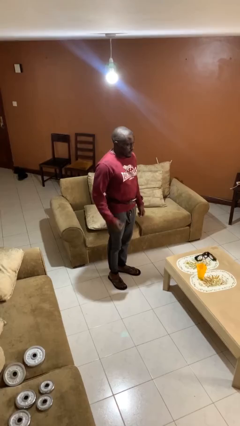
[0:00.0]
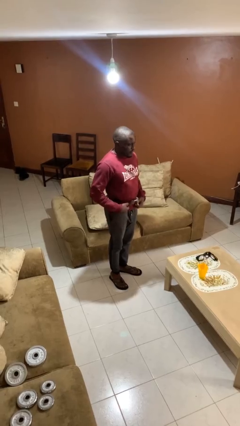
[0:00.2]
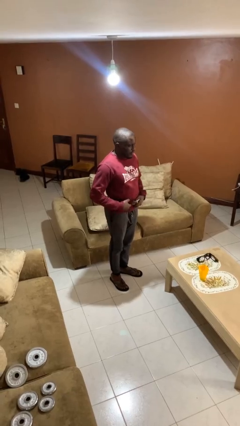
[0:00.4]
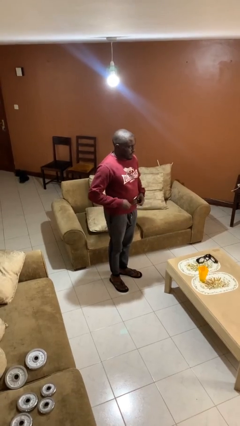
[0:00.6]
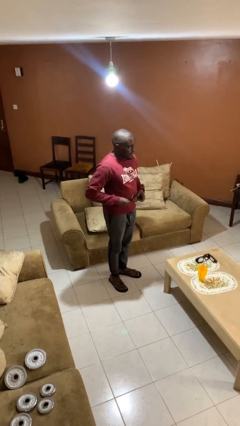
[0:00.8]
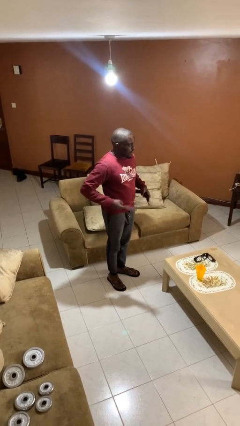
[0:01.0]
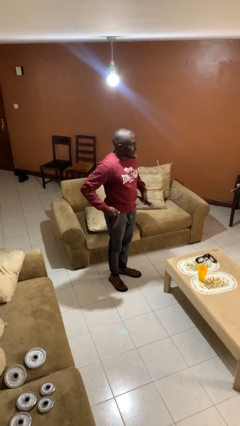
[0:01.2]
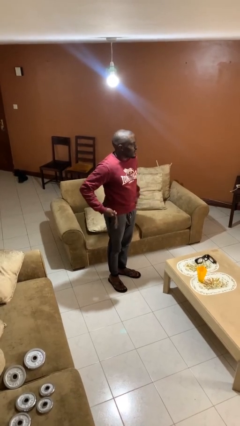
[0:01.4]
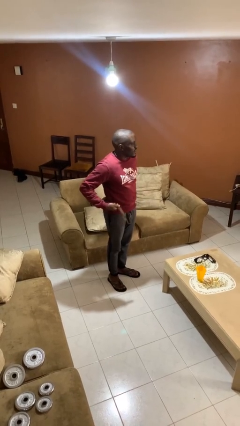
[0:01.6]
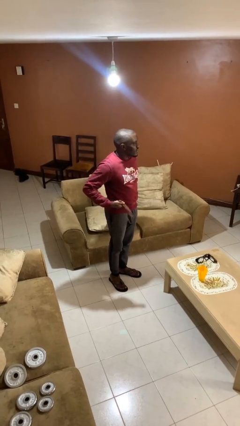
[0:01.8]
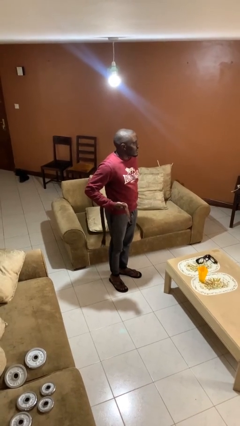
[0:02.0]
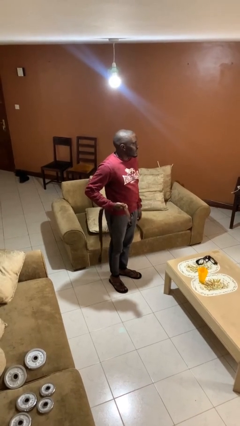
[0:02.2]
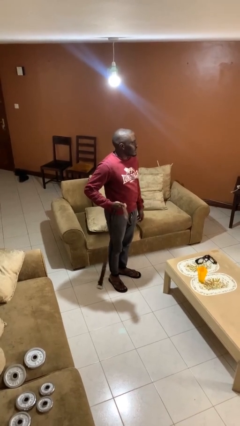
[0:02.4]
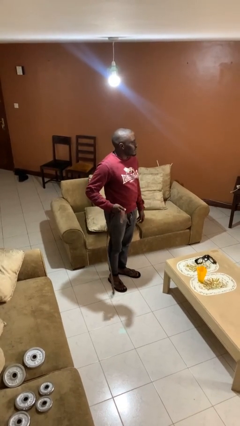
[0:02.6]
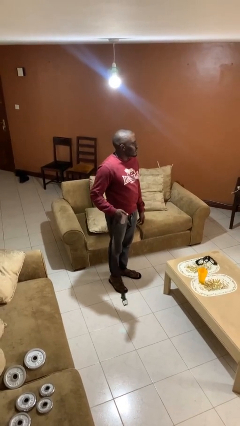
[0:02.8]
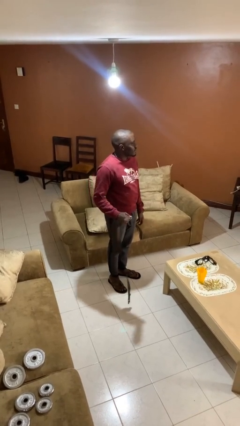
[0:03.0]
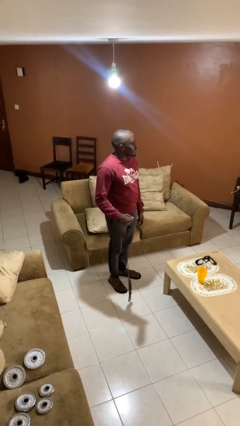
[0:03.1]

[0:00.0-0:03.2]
person takes off belt

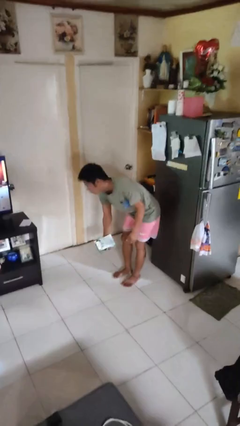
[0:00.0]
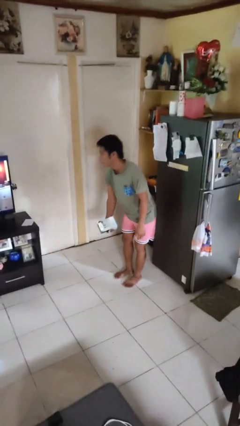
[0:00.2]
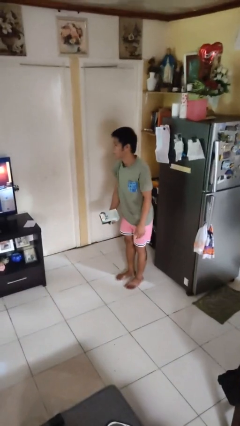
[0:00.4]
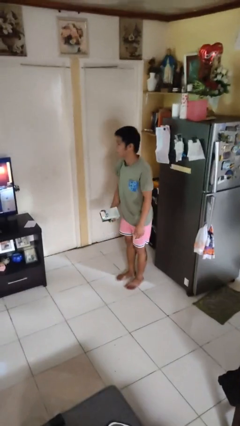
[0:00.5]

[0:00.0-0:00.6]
person catches dropped object

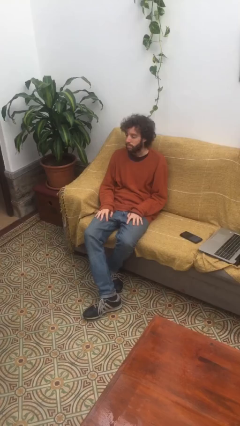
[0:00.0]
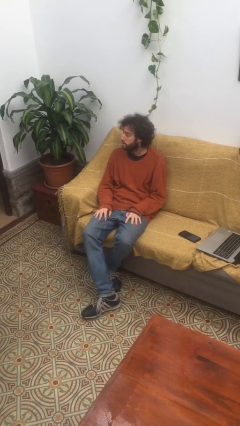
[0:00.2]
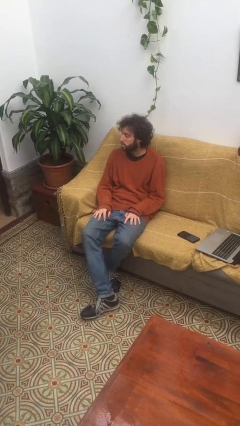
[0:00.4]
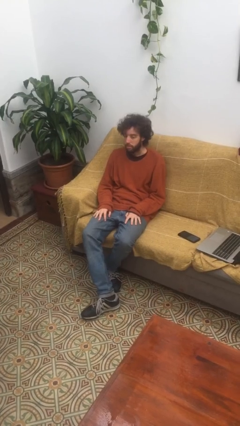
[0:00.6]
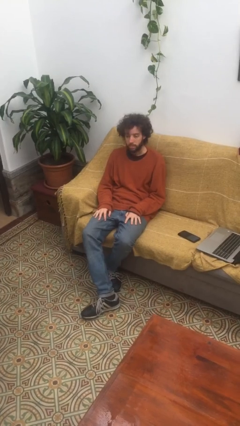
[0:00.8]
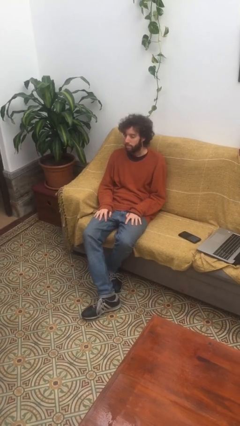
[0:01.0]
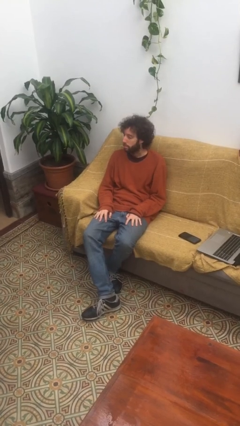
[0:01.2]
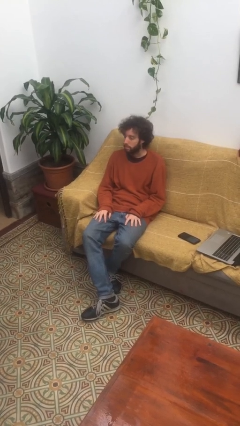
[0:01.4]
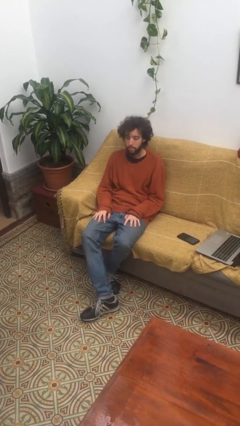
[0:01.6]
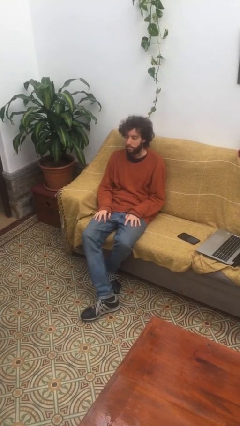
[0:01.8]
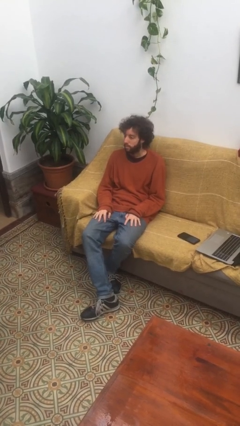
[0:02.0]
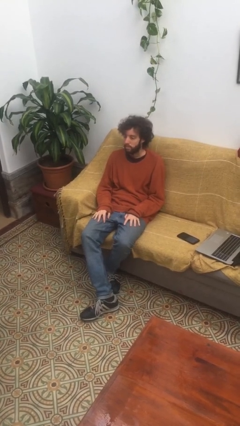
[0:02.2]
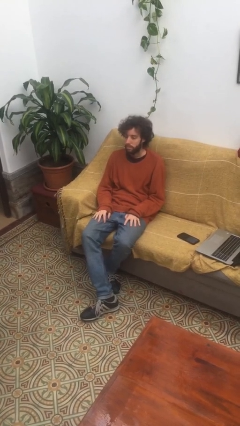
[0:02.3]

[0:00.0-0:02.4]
person shakes head

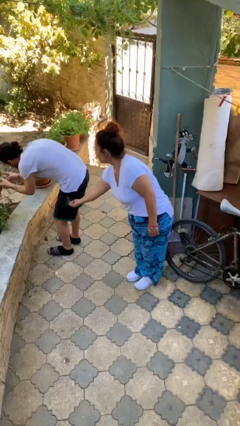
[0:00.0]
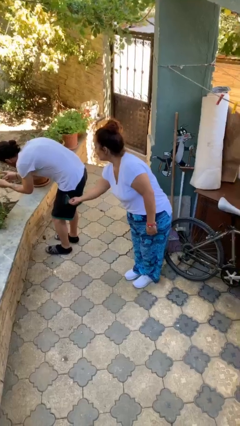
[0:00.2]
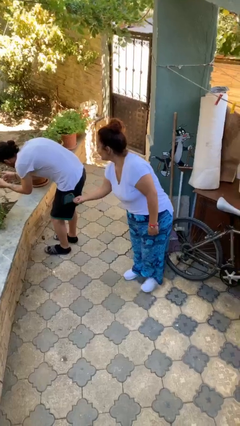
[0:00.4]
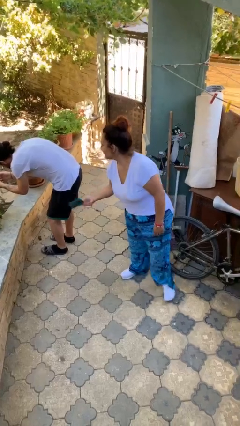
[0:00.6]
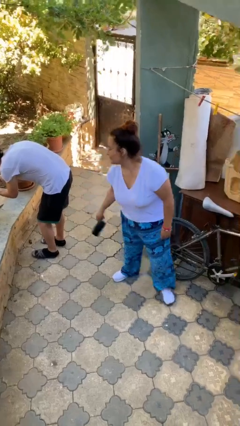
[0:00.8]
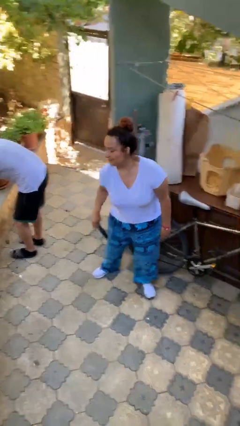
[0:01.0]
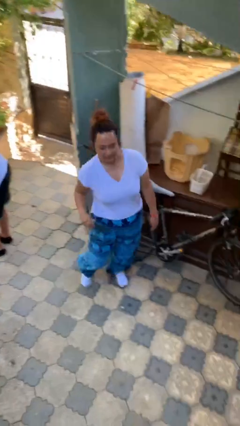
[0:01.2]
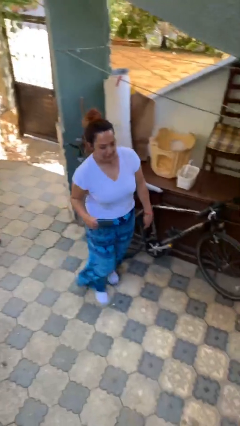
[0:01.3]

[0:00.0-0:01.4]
person steals object from person

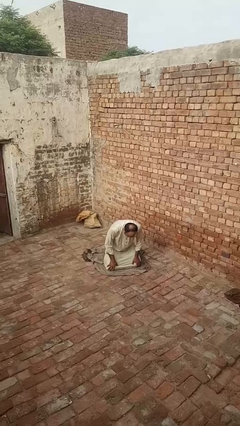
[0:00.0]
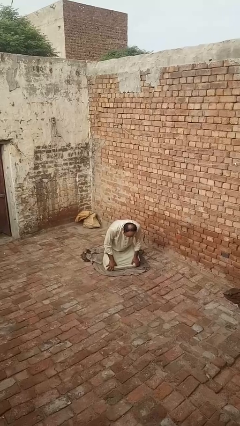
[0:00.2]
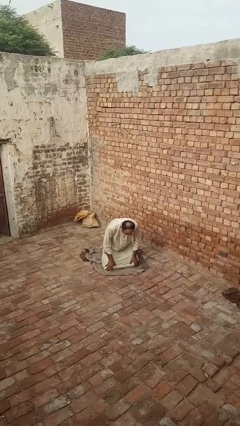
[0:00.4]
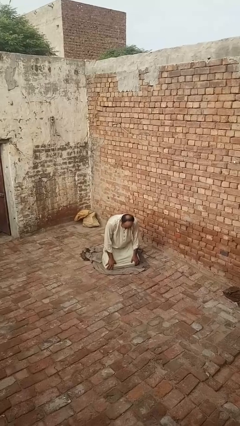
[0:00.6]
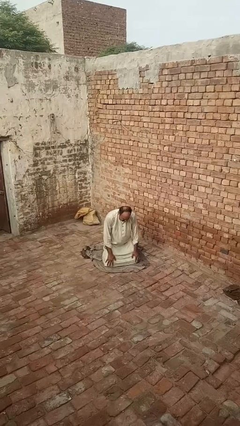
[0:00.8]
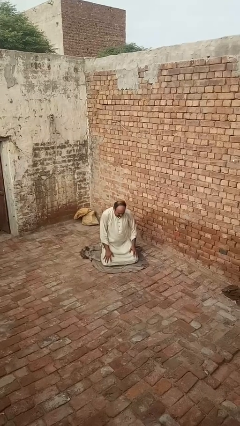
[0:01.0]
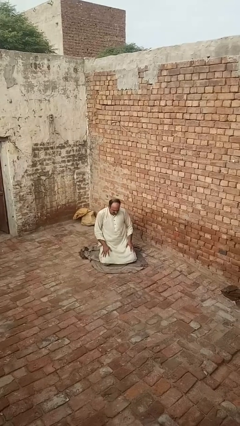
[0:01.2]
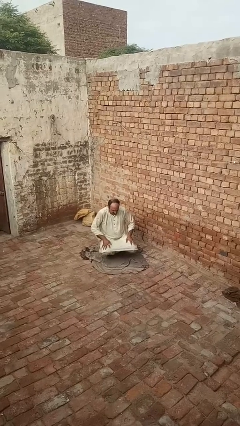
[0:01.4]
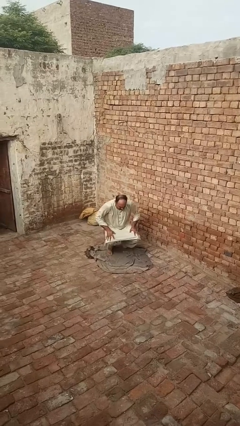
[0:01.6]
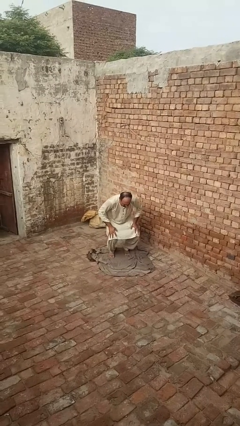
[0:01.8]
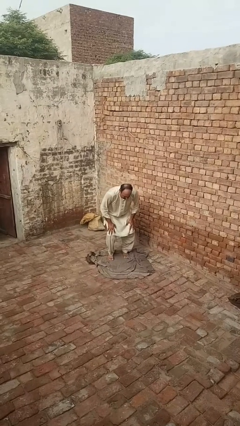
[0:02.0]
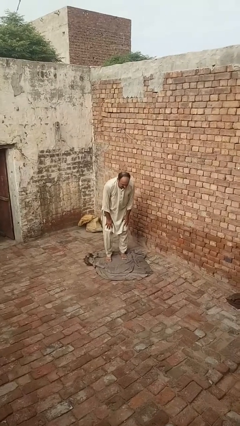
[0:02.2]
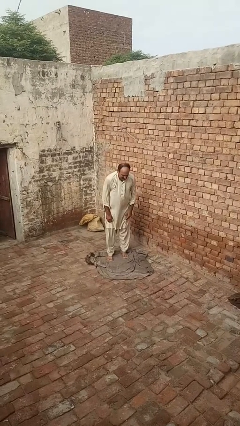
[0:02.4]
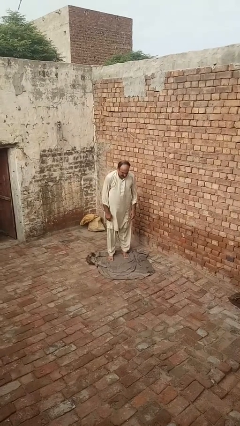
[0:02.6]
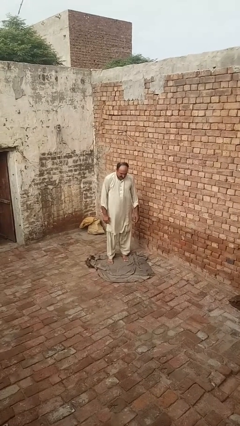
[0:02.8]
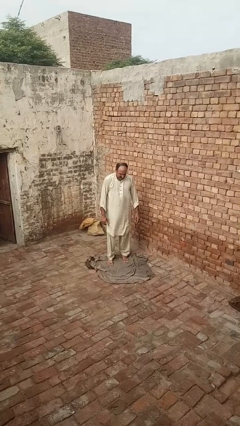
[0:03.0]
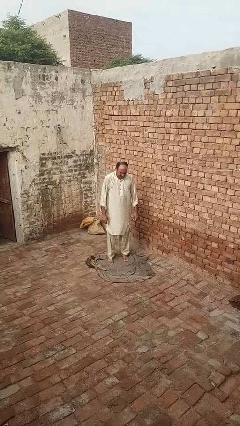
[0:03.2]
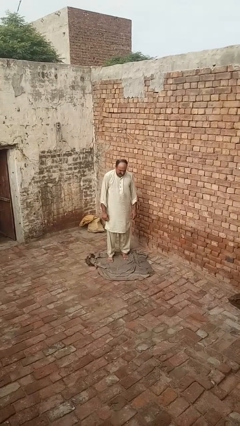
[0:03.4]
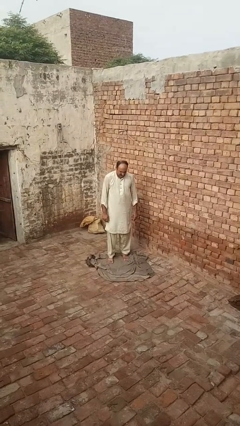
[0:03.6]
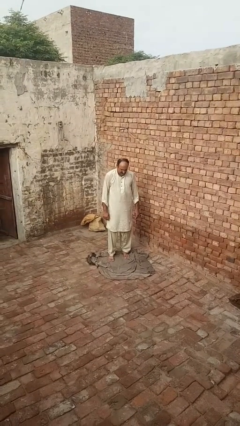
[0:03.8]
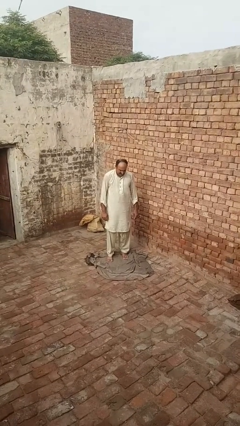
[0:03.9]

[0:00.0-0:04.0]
person stands up from floor

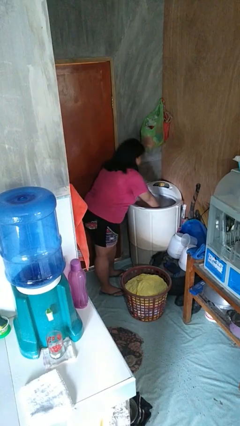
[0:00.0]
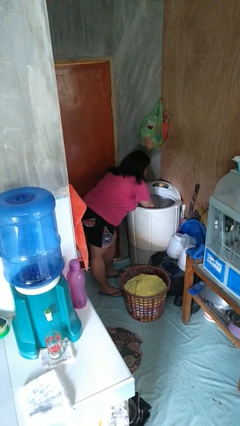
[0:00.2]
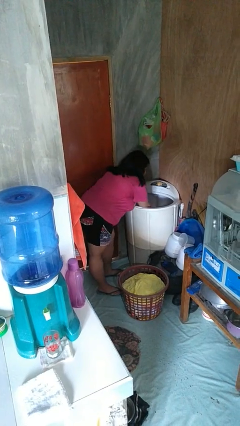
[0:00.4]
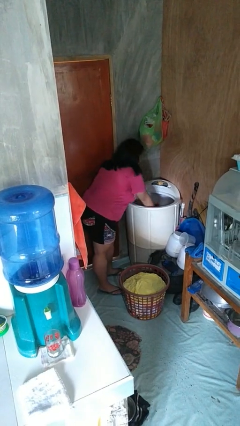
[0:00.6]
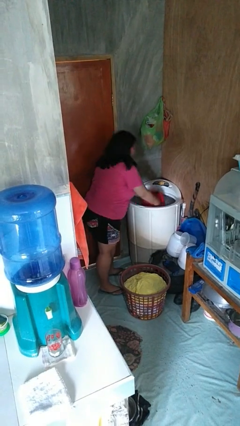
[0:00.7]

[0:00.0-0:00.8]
person unloads clotheswasher

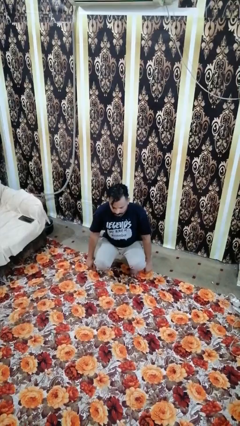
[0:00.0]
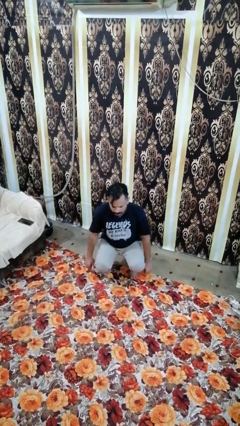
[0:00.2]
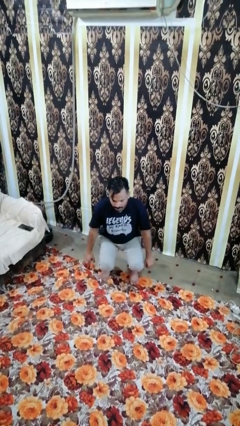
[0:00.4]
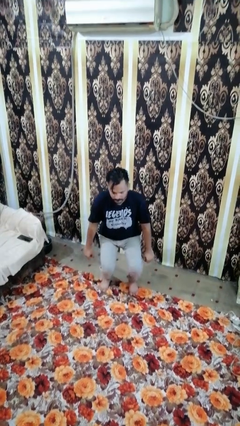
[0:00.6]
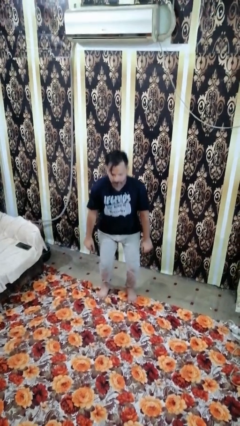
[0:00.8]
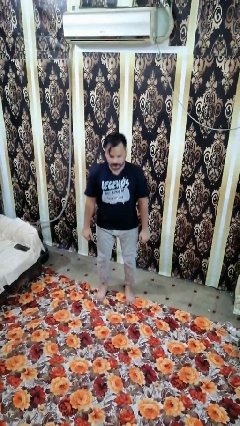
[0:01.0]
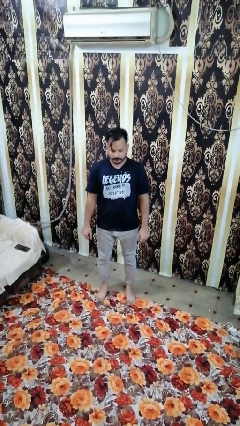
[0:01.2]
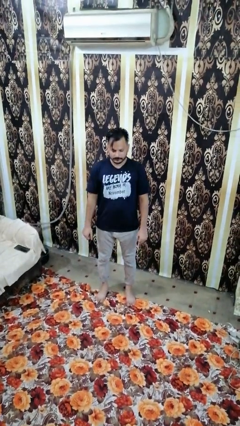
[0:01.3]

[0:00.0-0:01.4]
person stands up

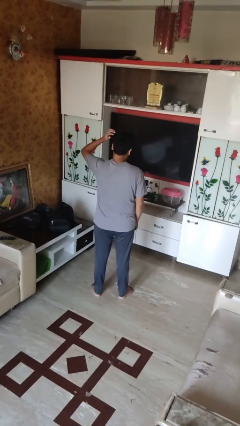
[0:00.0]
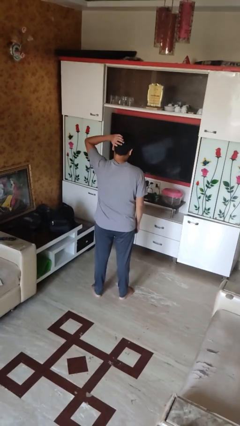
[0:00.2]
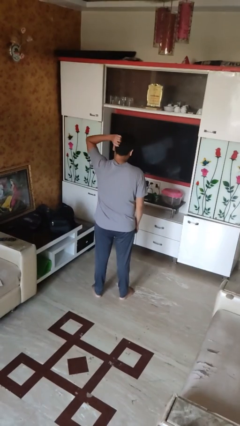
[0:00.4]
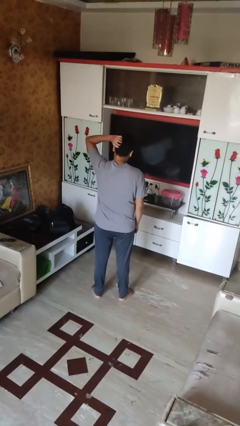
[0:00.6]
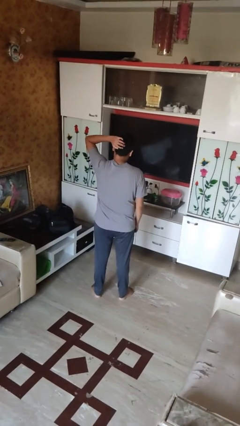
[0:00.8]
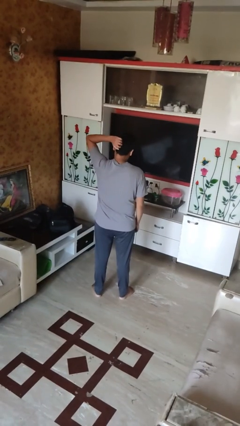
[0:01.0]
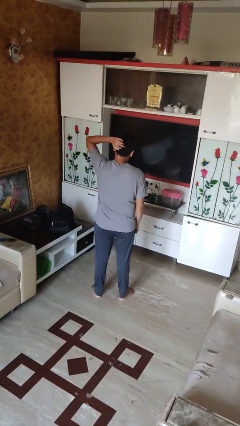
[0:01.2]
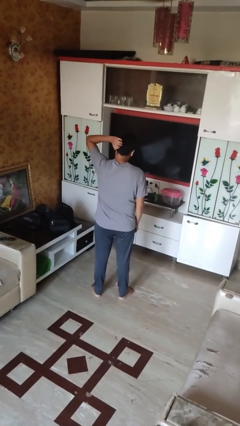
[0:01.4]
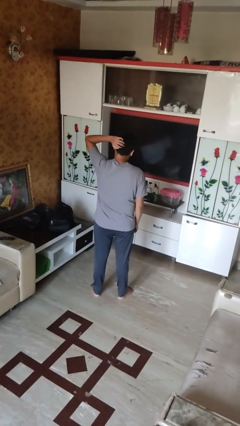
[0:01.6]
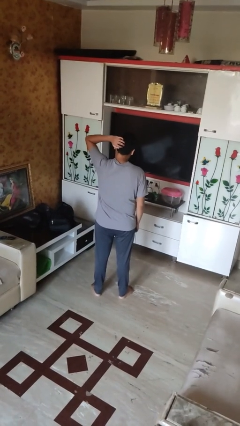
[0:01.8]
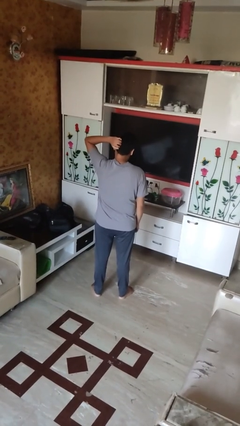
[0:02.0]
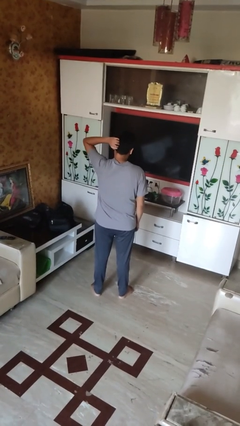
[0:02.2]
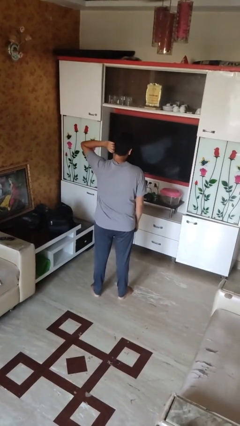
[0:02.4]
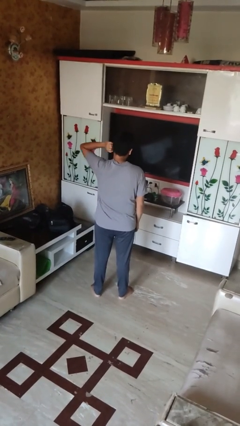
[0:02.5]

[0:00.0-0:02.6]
person scratches face

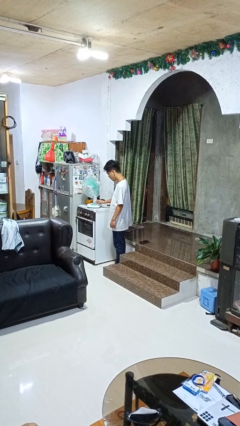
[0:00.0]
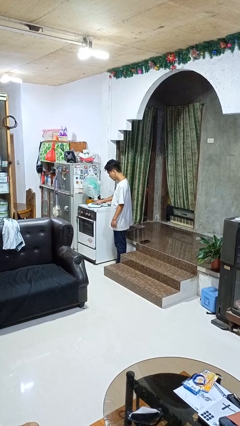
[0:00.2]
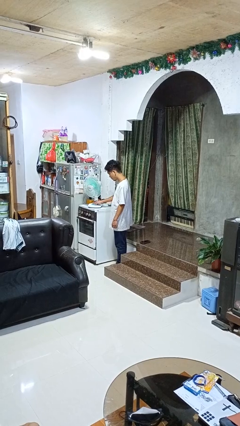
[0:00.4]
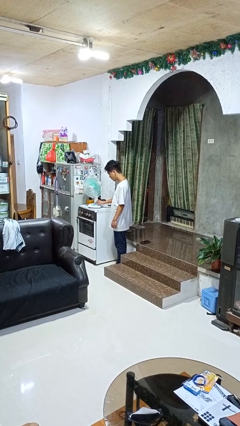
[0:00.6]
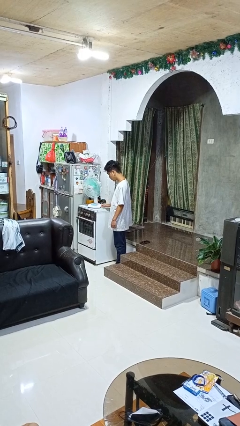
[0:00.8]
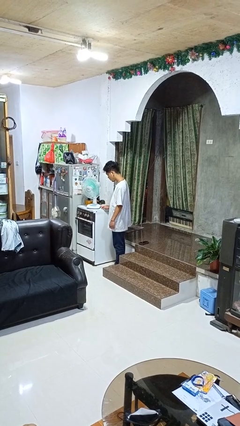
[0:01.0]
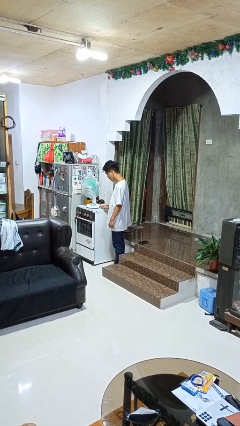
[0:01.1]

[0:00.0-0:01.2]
person turns off fan
